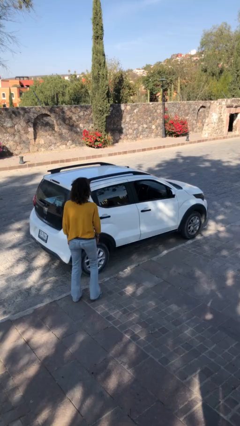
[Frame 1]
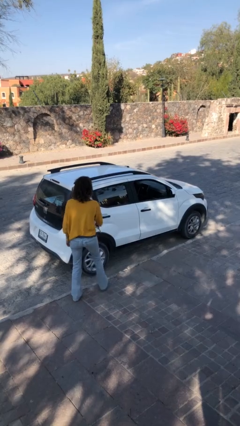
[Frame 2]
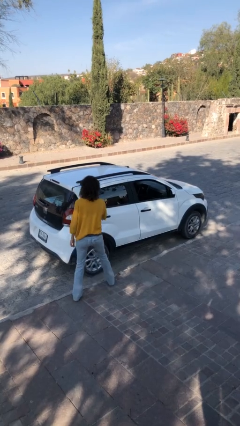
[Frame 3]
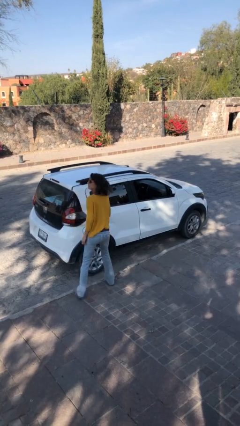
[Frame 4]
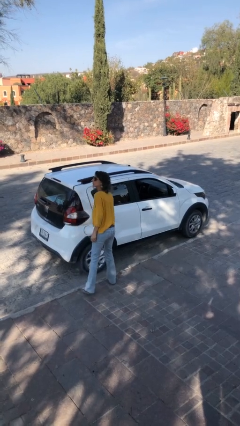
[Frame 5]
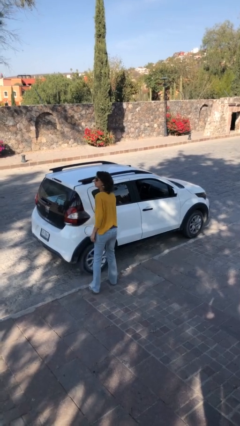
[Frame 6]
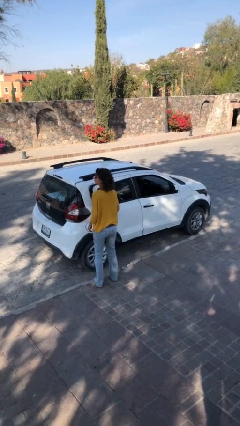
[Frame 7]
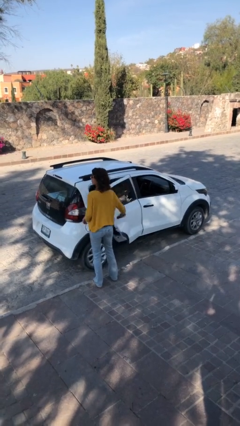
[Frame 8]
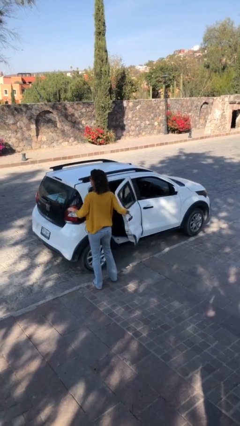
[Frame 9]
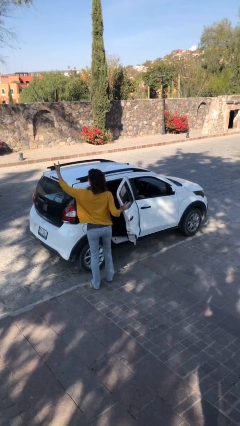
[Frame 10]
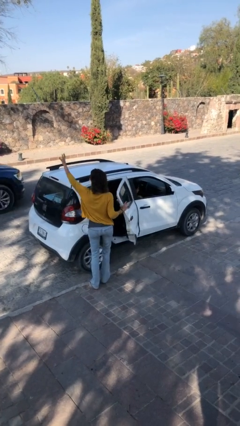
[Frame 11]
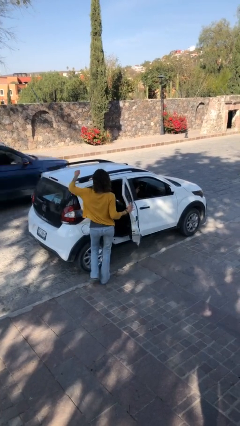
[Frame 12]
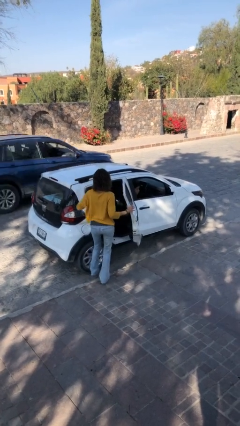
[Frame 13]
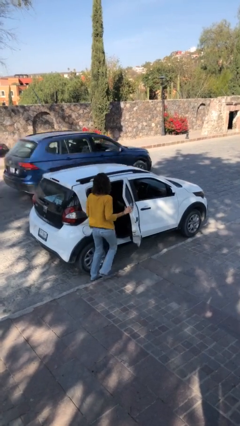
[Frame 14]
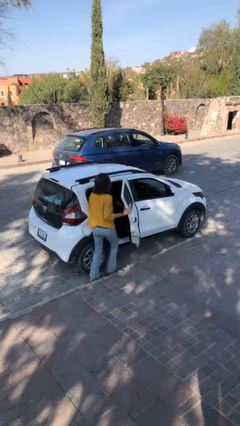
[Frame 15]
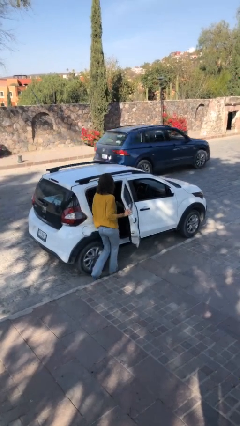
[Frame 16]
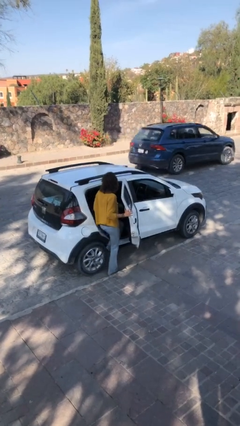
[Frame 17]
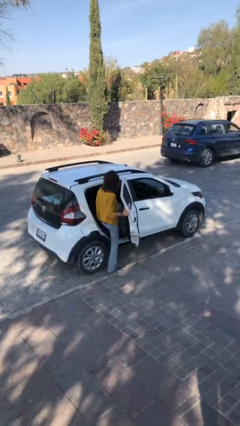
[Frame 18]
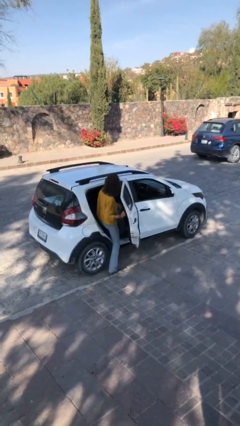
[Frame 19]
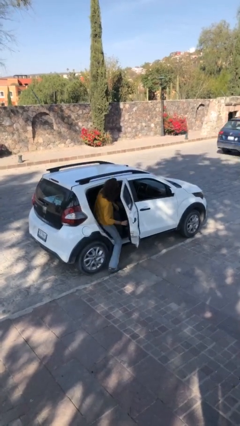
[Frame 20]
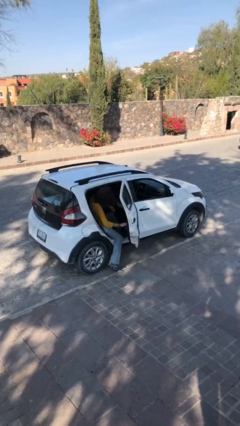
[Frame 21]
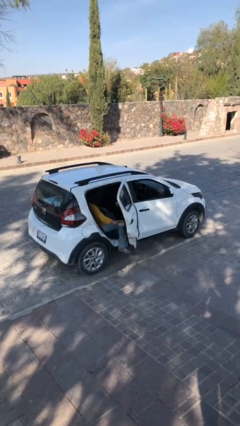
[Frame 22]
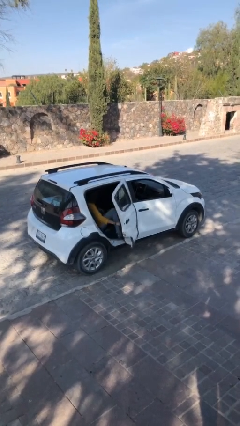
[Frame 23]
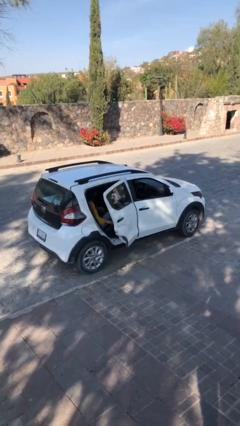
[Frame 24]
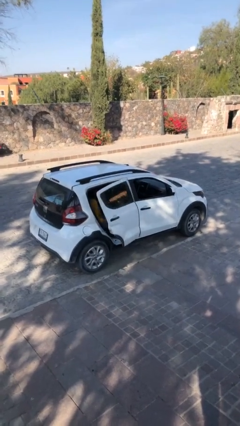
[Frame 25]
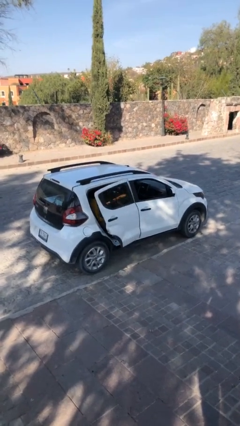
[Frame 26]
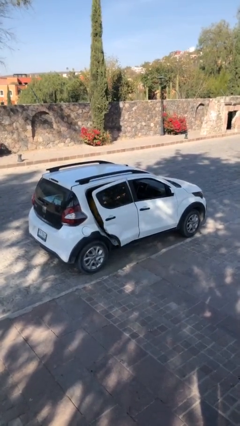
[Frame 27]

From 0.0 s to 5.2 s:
car picks up person

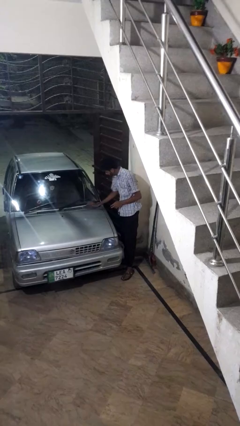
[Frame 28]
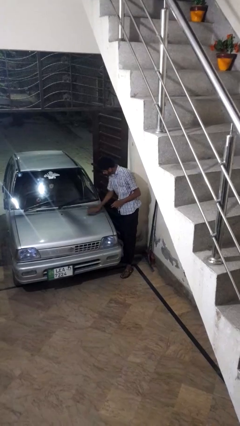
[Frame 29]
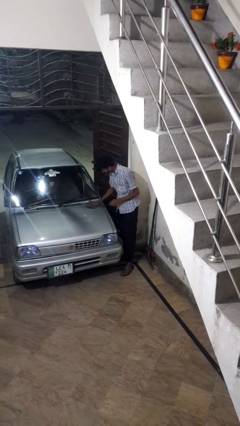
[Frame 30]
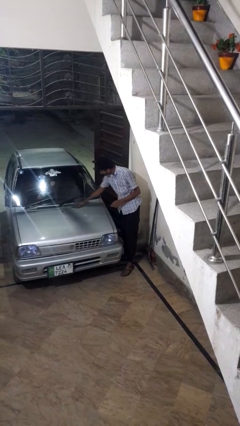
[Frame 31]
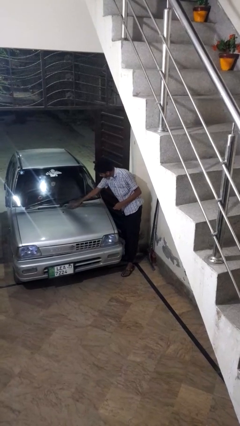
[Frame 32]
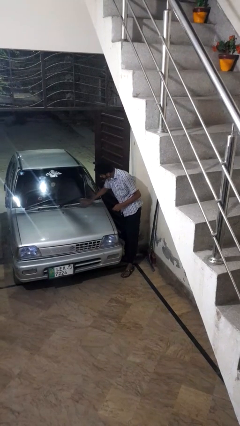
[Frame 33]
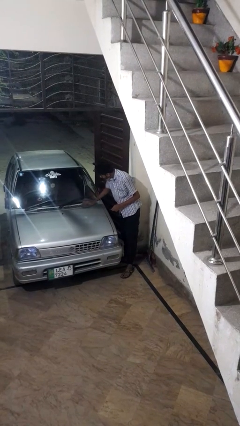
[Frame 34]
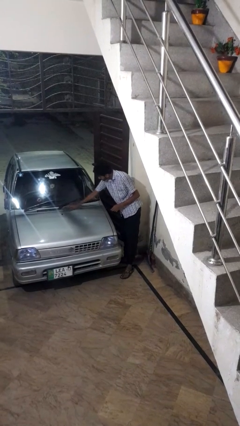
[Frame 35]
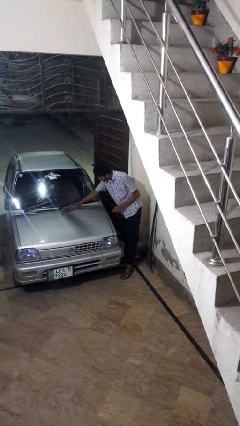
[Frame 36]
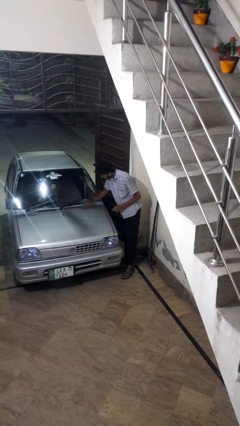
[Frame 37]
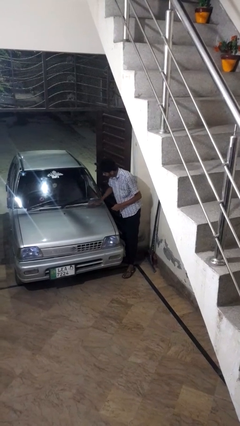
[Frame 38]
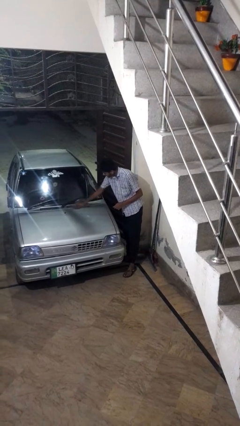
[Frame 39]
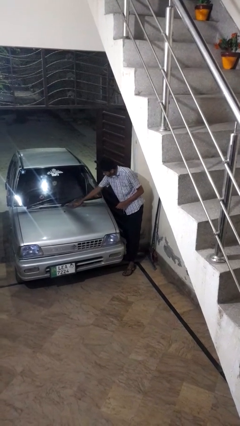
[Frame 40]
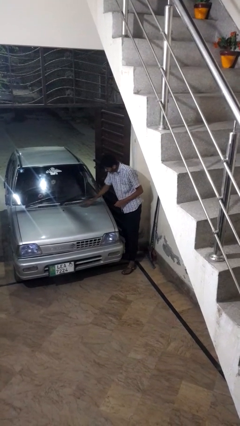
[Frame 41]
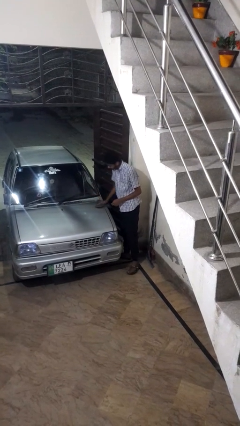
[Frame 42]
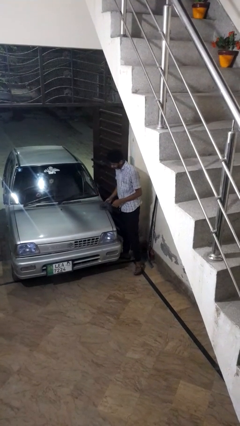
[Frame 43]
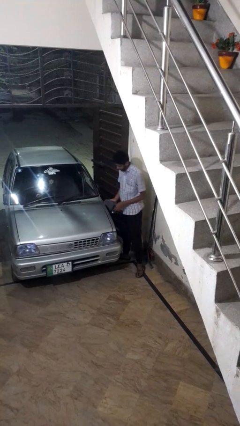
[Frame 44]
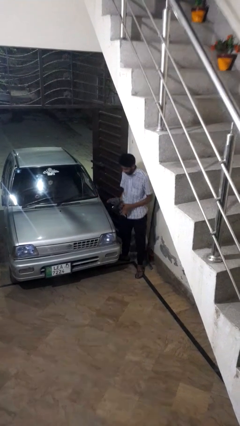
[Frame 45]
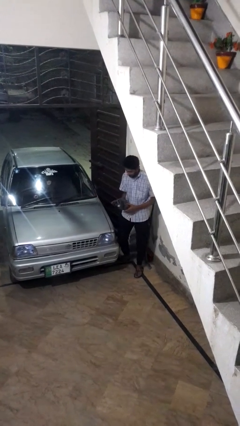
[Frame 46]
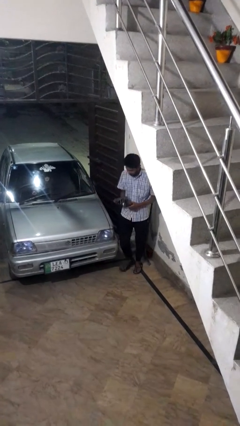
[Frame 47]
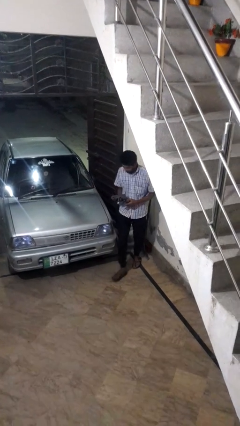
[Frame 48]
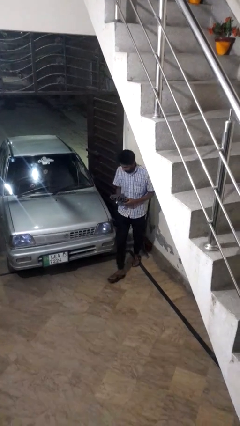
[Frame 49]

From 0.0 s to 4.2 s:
person polishes car with rag

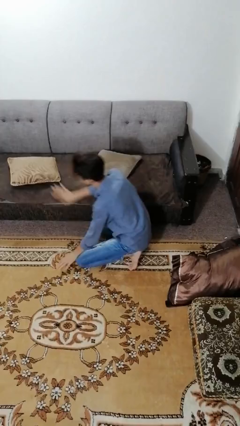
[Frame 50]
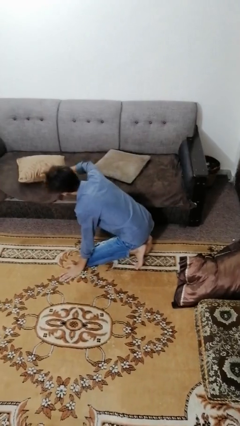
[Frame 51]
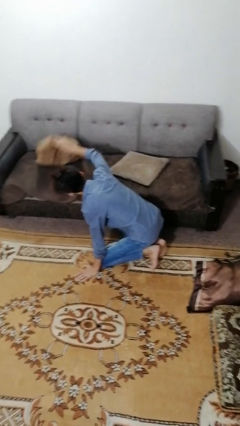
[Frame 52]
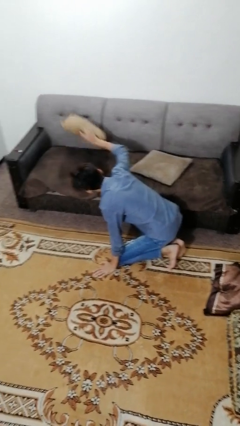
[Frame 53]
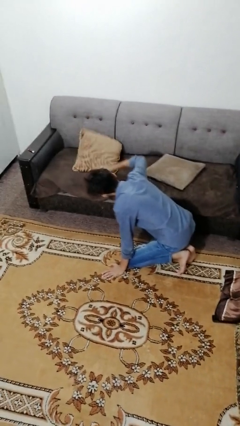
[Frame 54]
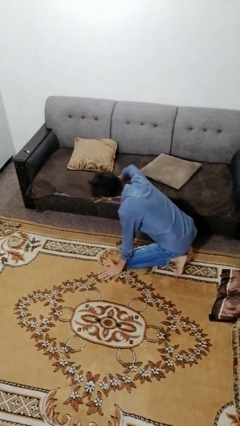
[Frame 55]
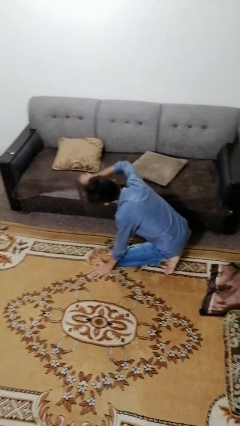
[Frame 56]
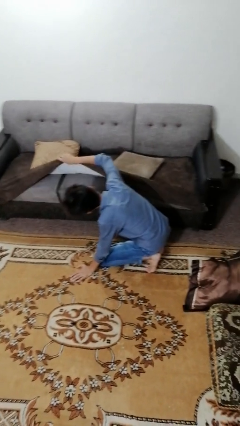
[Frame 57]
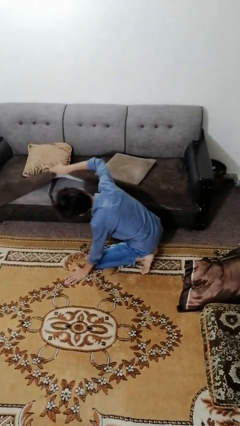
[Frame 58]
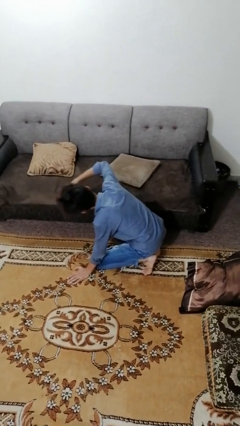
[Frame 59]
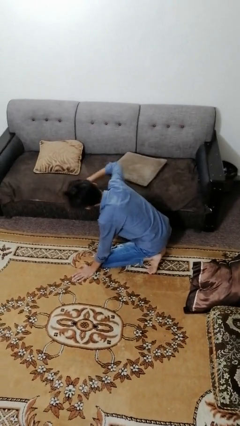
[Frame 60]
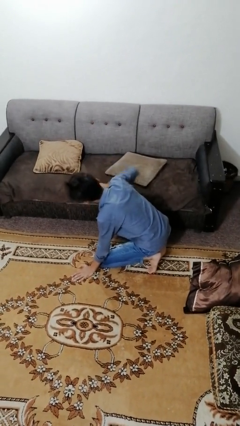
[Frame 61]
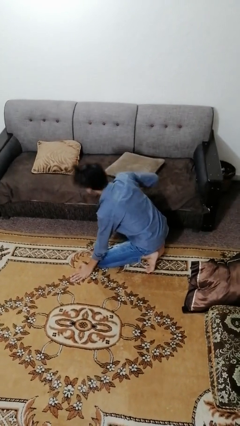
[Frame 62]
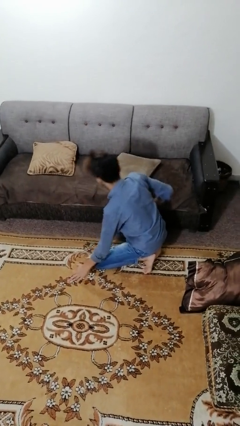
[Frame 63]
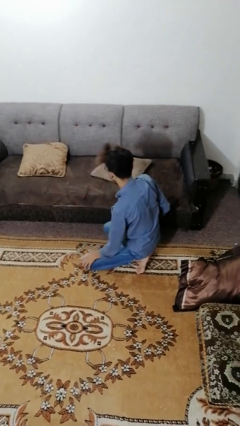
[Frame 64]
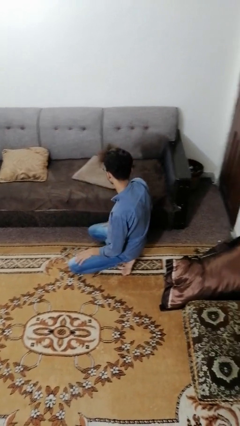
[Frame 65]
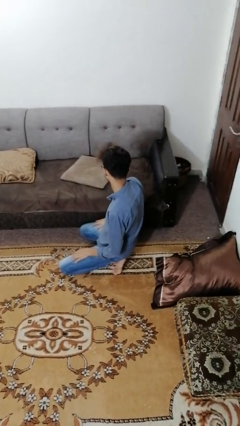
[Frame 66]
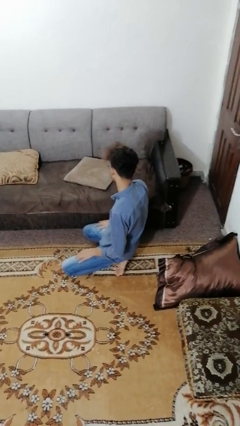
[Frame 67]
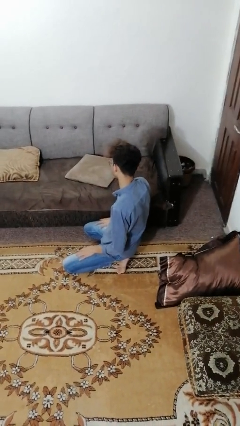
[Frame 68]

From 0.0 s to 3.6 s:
person searches in couch

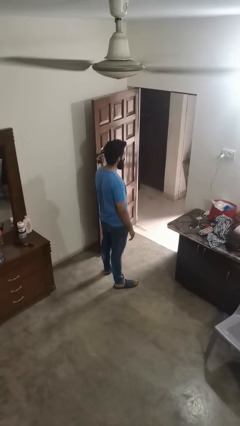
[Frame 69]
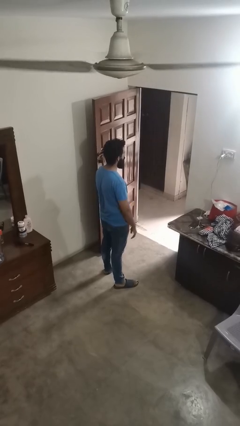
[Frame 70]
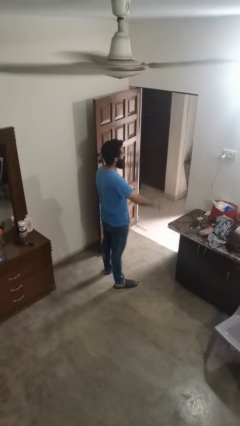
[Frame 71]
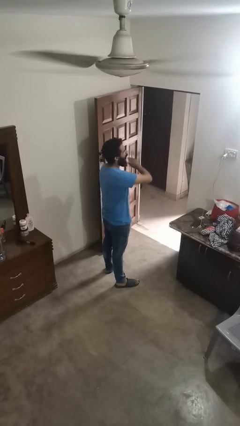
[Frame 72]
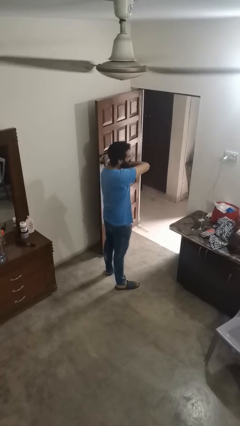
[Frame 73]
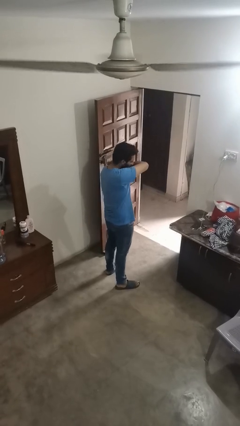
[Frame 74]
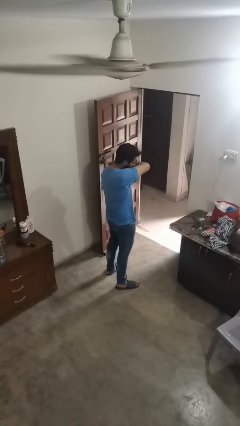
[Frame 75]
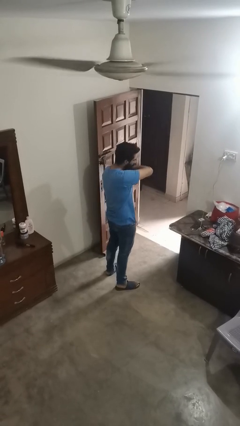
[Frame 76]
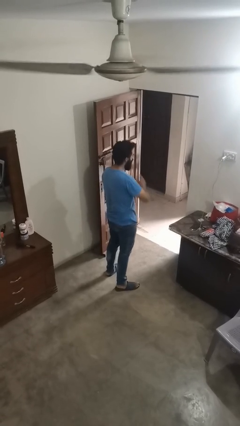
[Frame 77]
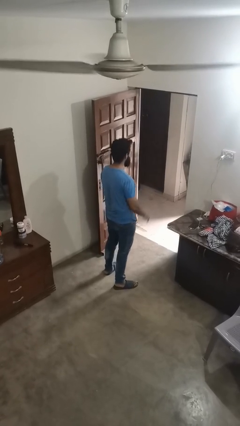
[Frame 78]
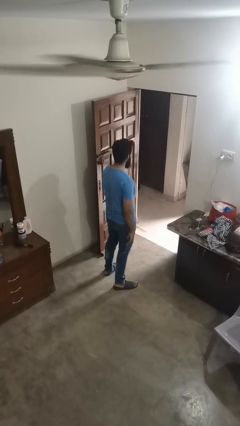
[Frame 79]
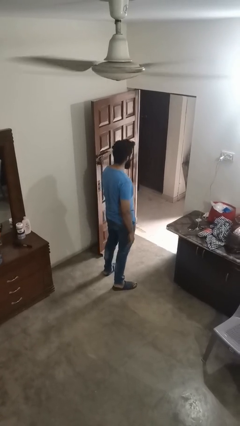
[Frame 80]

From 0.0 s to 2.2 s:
person sneezes into arm

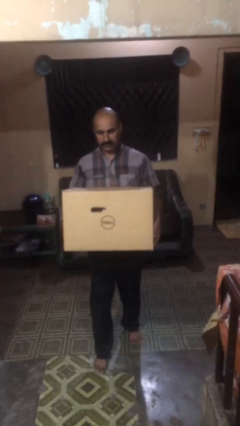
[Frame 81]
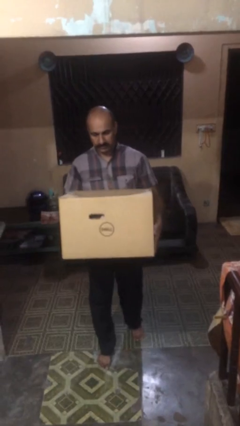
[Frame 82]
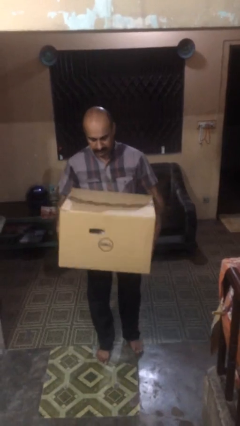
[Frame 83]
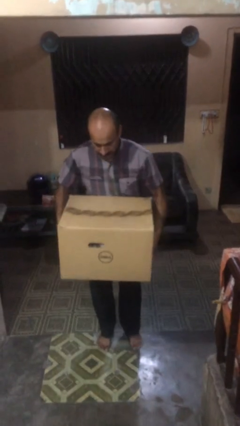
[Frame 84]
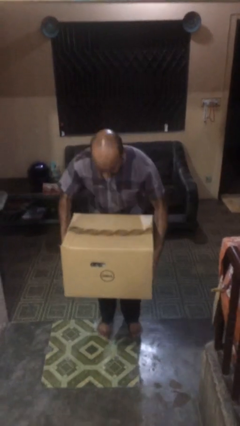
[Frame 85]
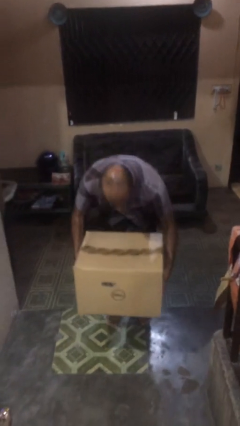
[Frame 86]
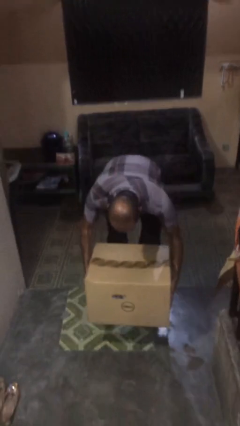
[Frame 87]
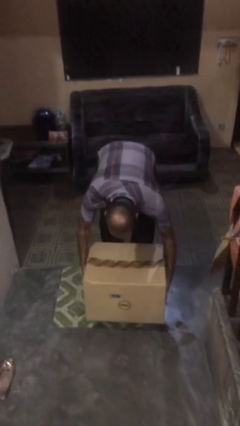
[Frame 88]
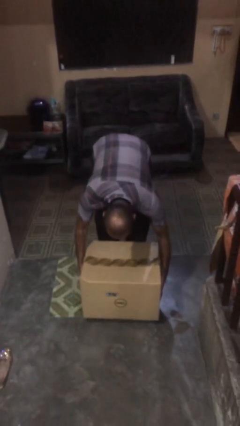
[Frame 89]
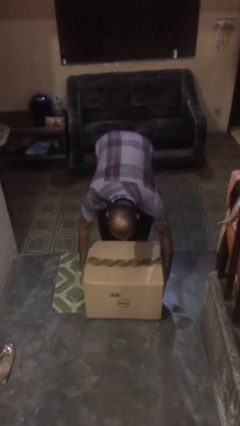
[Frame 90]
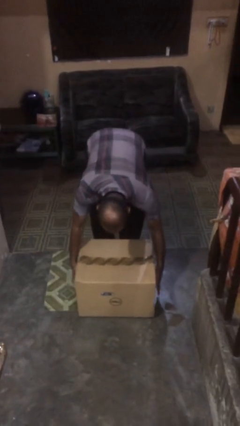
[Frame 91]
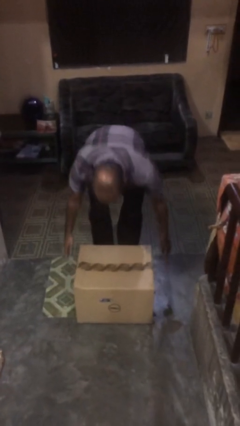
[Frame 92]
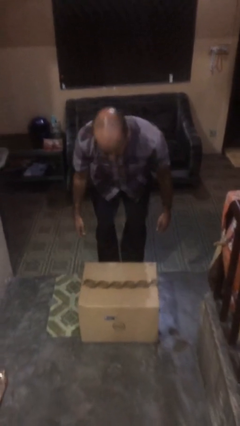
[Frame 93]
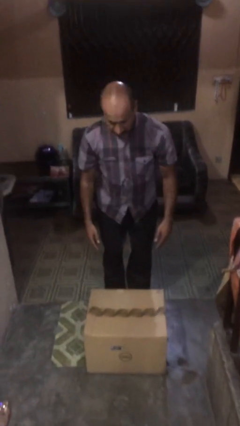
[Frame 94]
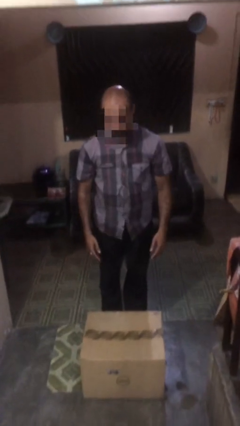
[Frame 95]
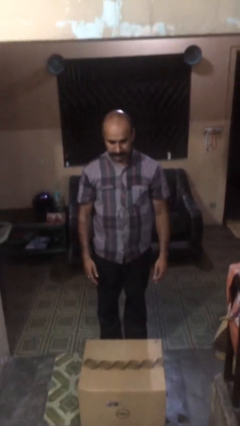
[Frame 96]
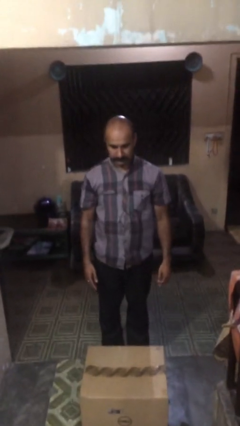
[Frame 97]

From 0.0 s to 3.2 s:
person puts down object on floor
